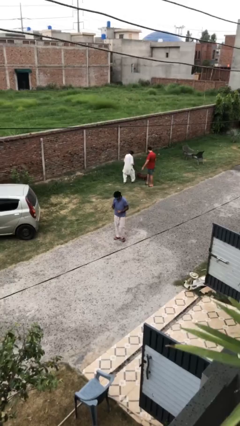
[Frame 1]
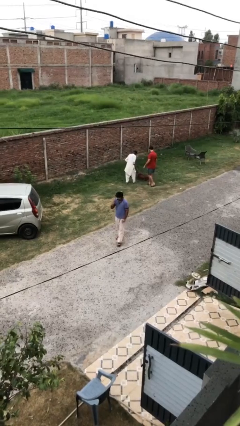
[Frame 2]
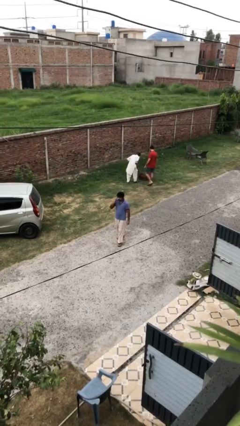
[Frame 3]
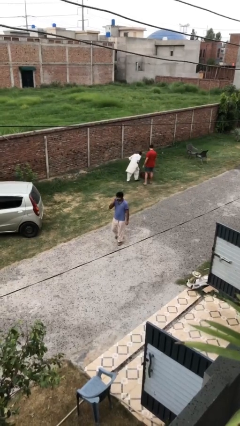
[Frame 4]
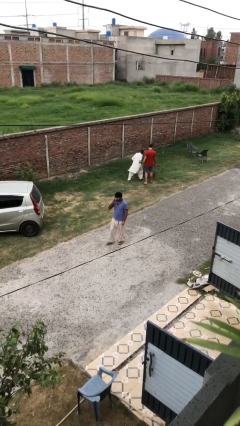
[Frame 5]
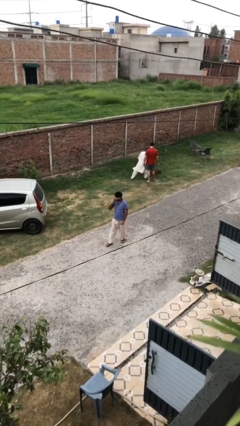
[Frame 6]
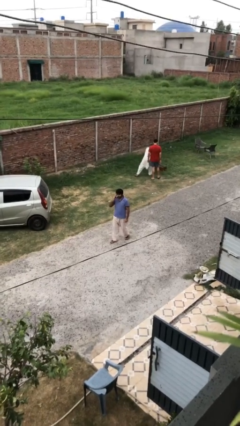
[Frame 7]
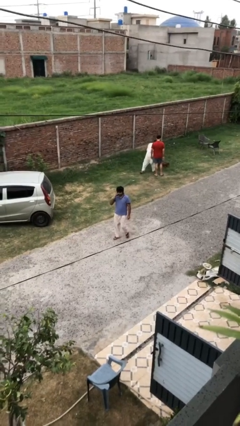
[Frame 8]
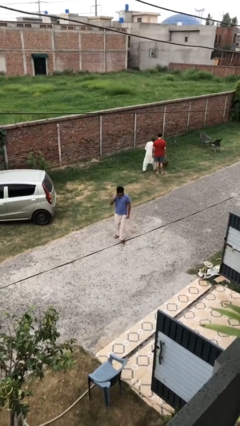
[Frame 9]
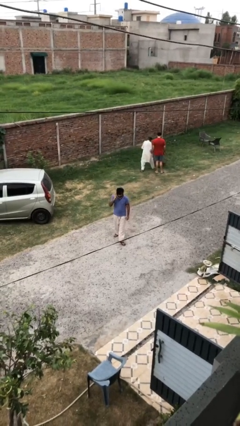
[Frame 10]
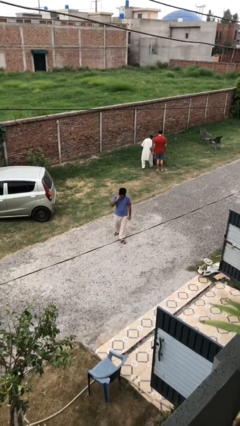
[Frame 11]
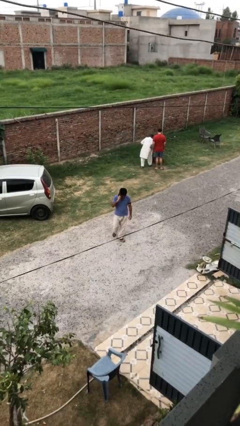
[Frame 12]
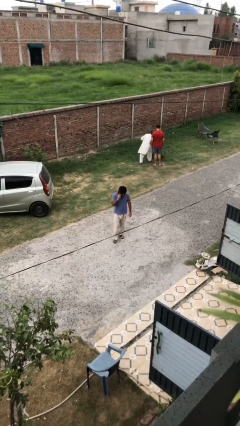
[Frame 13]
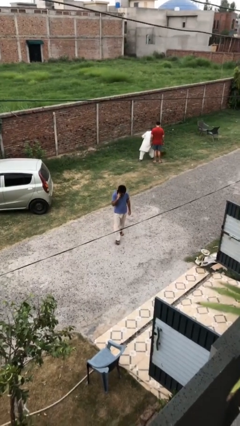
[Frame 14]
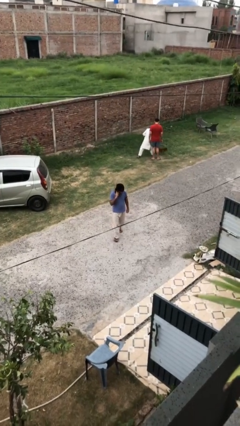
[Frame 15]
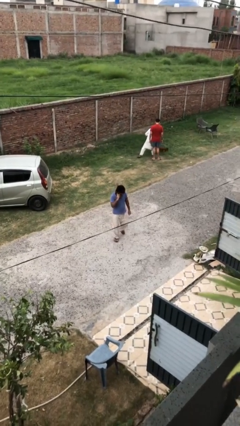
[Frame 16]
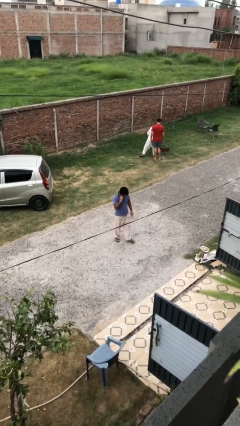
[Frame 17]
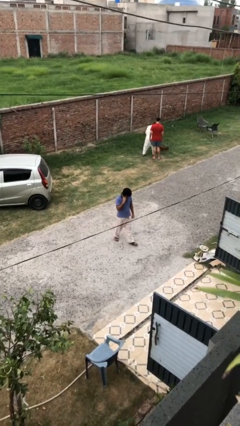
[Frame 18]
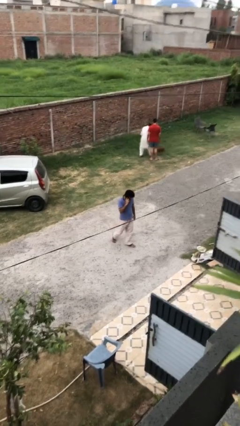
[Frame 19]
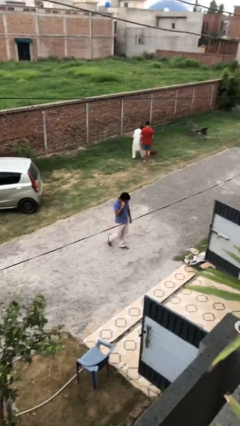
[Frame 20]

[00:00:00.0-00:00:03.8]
person talks on phone

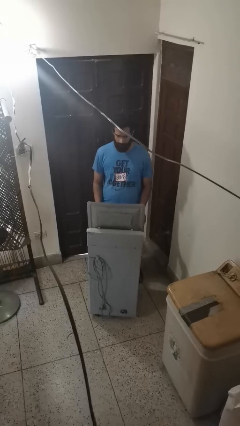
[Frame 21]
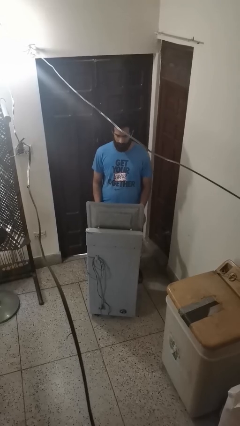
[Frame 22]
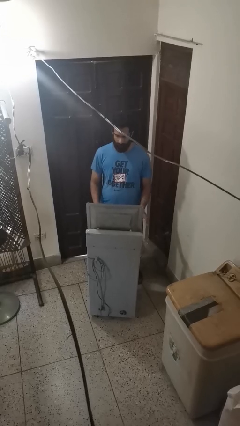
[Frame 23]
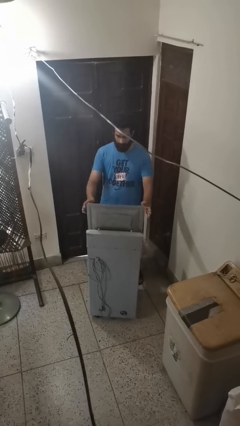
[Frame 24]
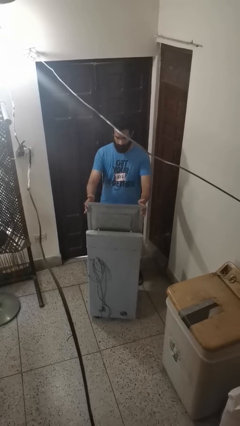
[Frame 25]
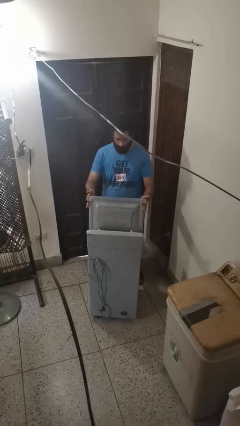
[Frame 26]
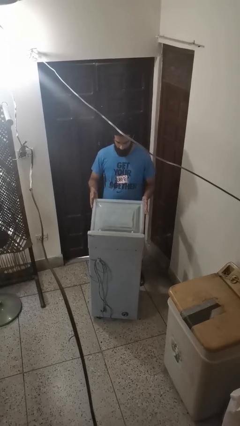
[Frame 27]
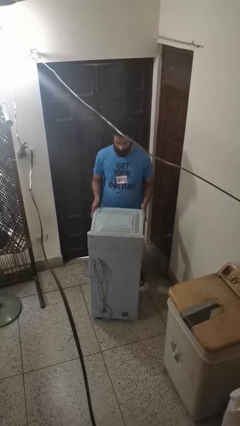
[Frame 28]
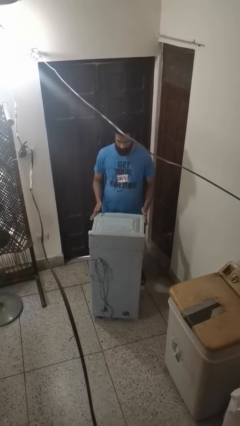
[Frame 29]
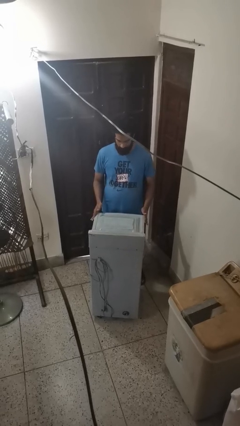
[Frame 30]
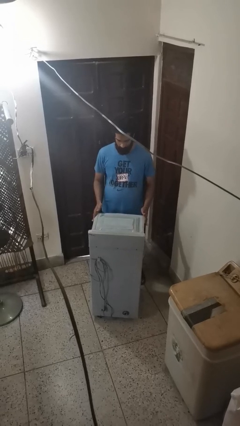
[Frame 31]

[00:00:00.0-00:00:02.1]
person closes clothes washer

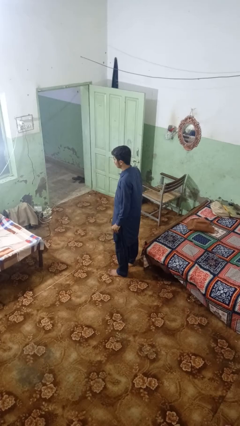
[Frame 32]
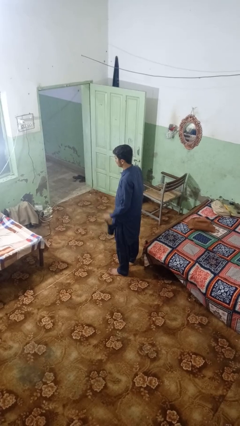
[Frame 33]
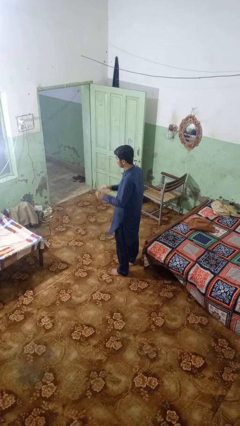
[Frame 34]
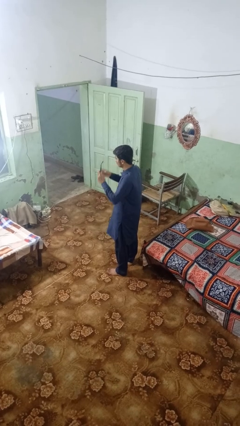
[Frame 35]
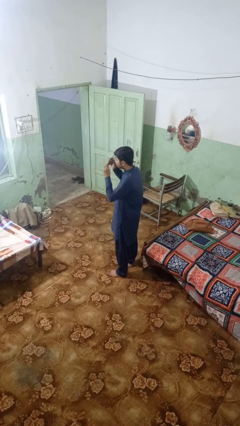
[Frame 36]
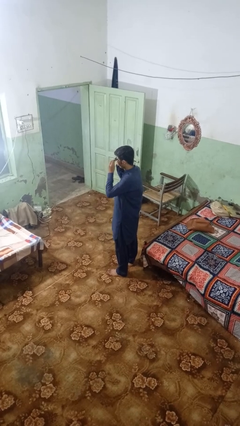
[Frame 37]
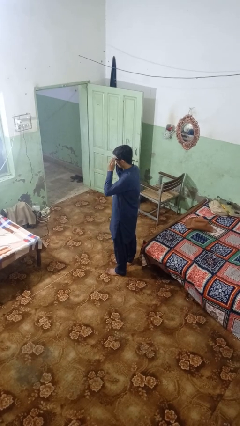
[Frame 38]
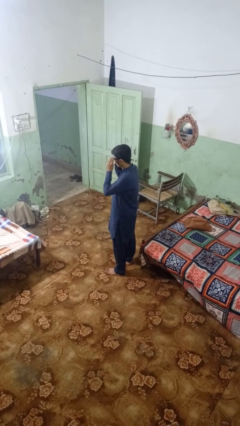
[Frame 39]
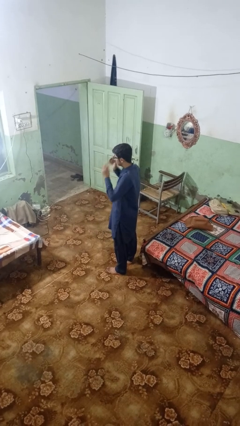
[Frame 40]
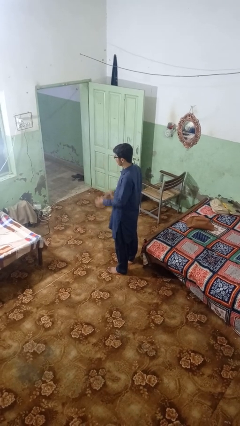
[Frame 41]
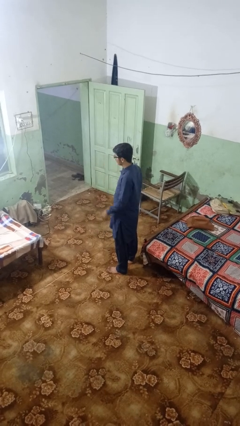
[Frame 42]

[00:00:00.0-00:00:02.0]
person puts on glasses

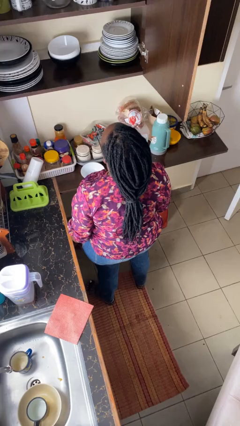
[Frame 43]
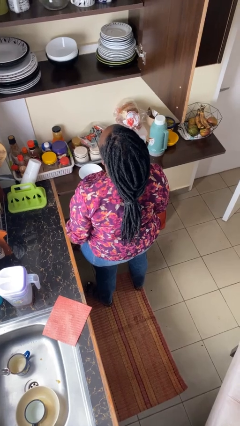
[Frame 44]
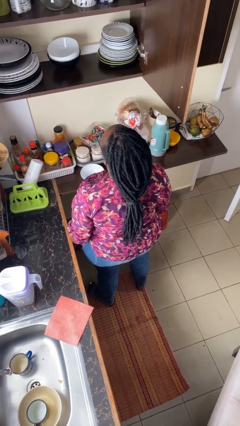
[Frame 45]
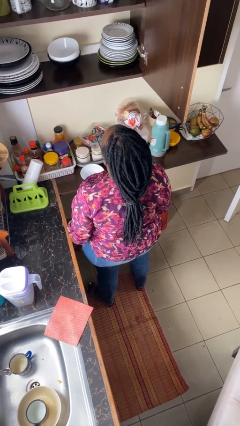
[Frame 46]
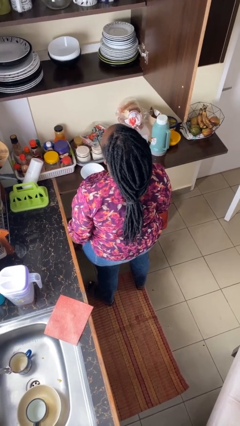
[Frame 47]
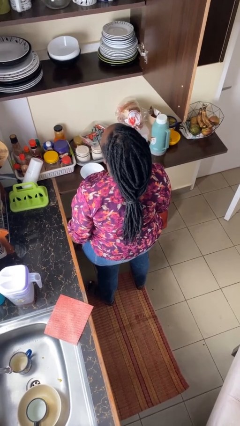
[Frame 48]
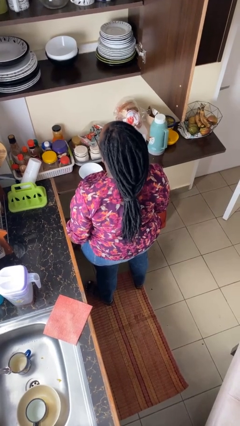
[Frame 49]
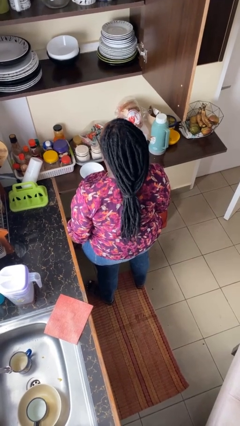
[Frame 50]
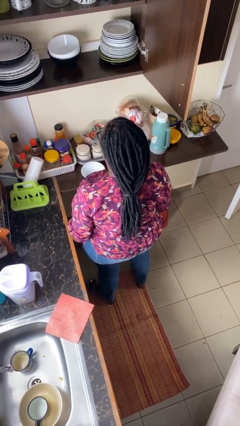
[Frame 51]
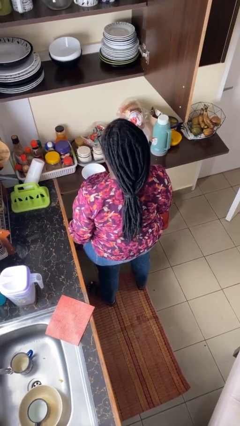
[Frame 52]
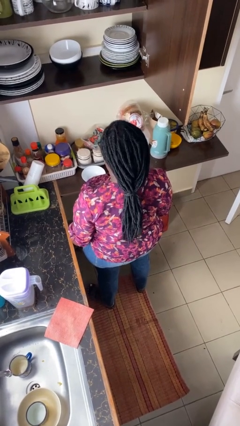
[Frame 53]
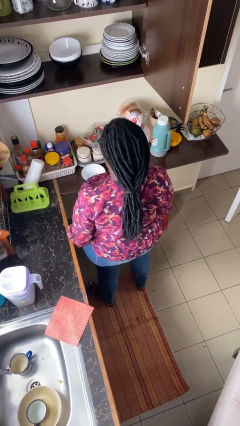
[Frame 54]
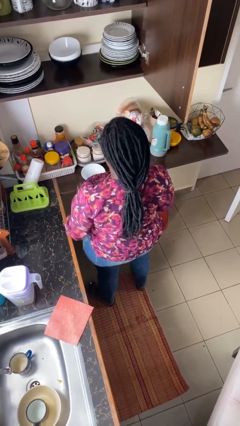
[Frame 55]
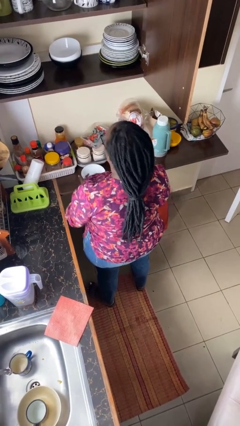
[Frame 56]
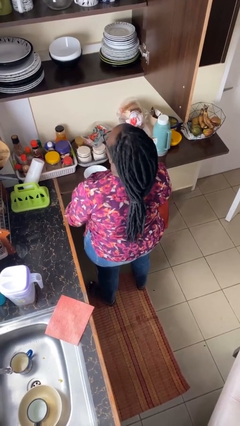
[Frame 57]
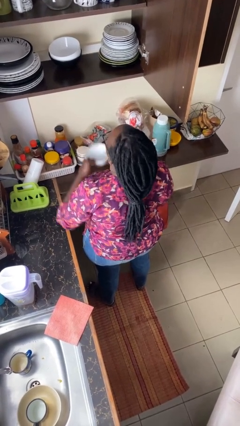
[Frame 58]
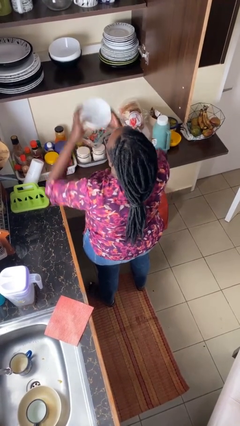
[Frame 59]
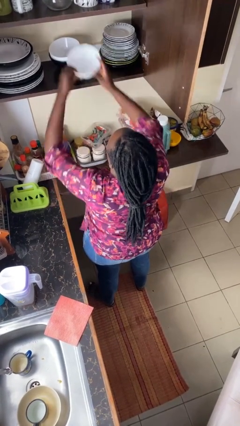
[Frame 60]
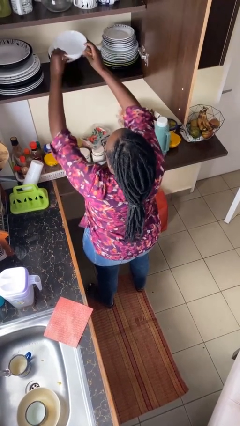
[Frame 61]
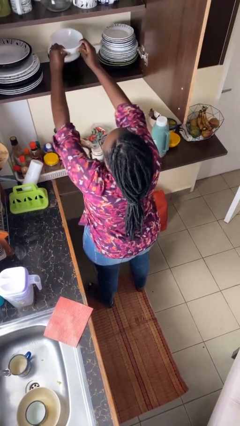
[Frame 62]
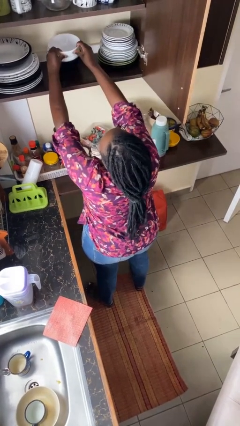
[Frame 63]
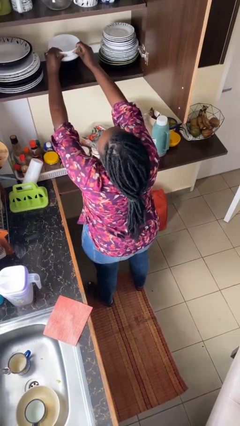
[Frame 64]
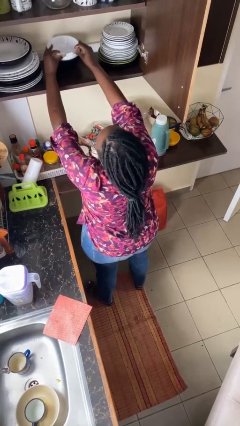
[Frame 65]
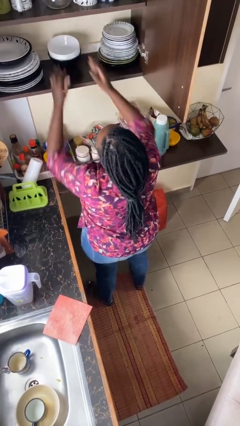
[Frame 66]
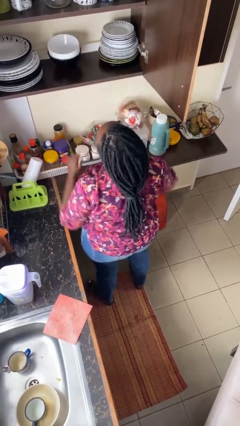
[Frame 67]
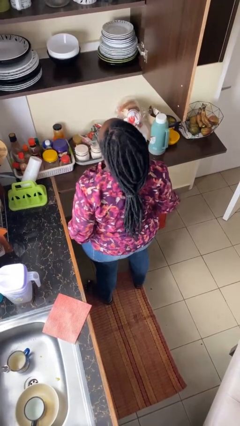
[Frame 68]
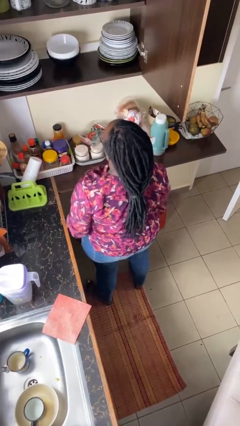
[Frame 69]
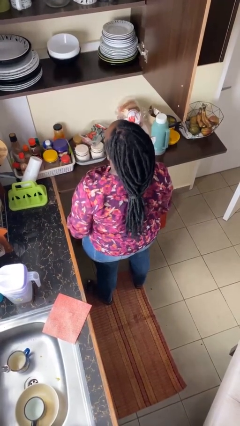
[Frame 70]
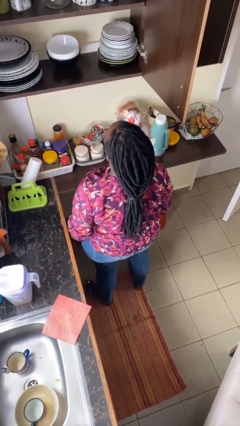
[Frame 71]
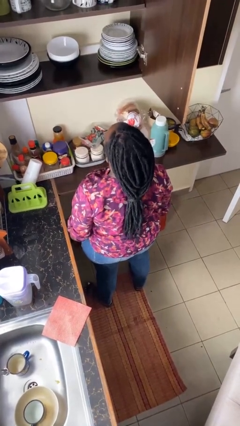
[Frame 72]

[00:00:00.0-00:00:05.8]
person puts object in cabinet

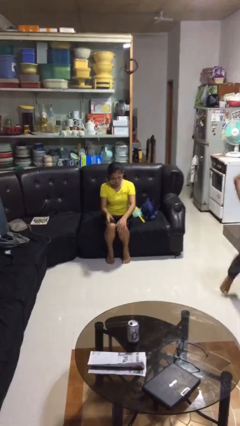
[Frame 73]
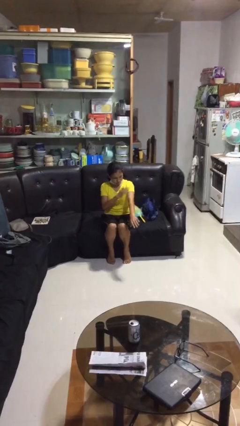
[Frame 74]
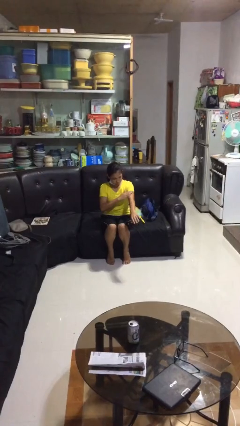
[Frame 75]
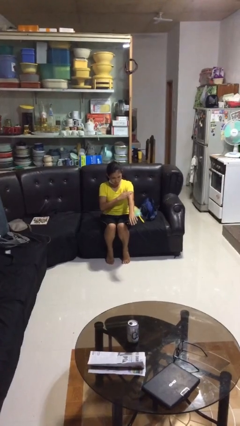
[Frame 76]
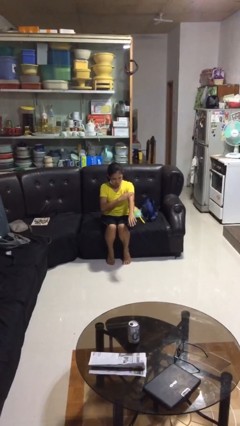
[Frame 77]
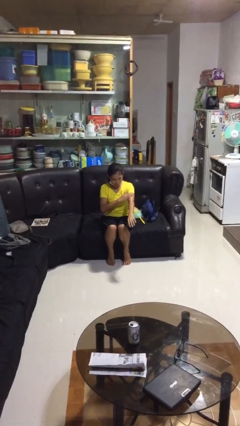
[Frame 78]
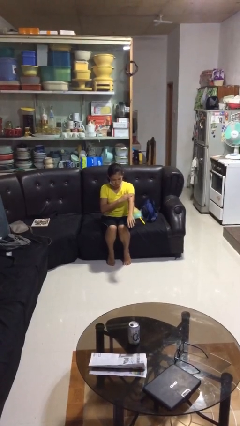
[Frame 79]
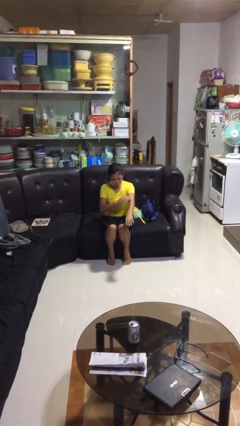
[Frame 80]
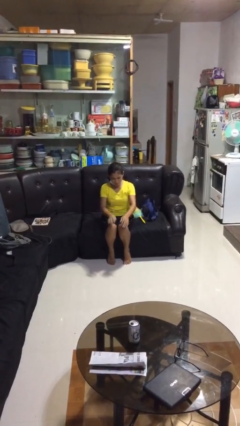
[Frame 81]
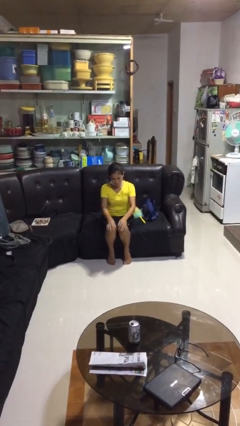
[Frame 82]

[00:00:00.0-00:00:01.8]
person swats bug

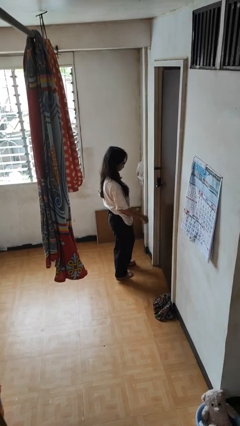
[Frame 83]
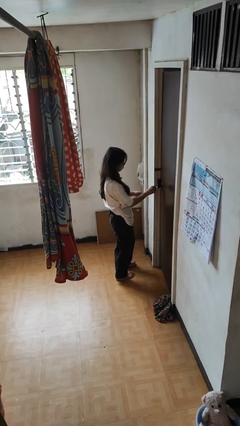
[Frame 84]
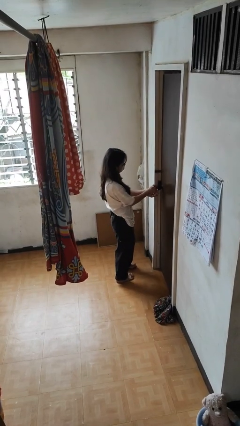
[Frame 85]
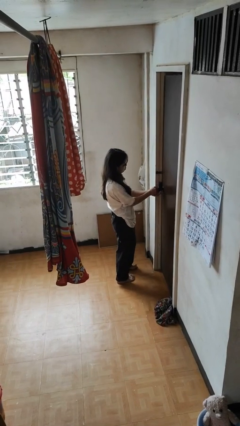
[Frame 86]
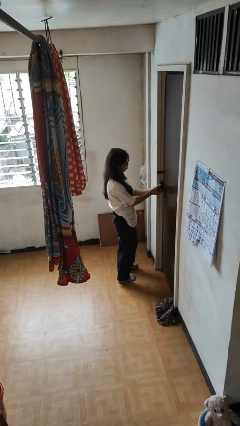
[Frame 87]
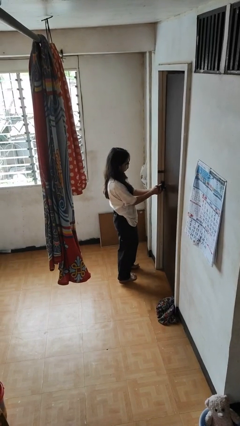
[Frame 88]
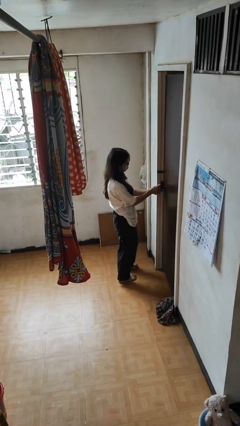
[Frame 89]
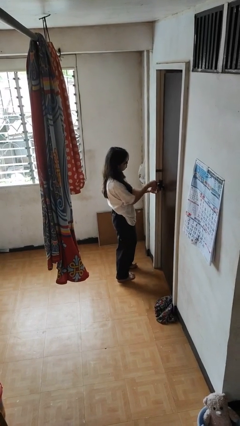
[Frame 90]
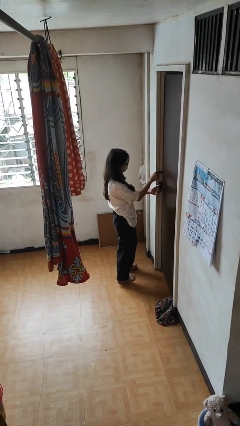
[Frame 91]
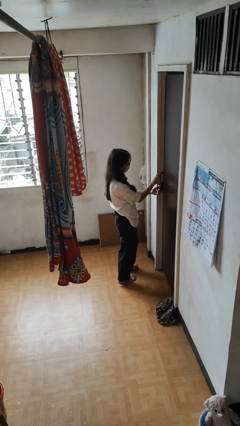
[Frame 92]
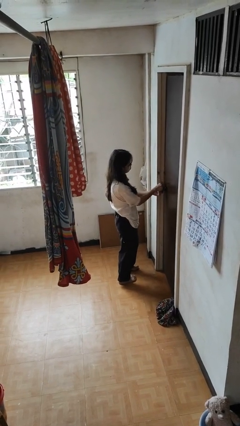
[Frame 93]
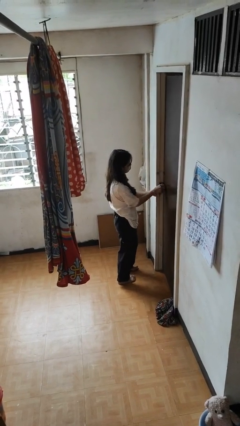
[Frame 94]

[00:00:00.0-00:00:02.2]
person unlocks door with keys
